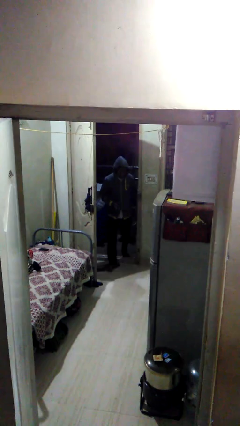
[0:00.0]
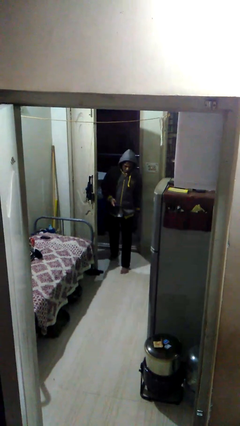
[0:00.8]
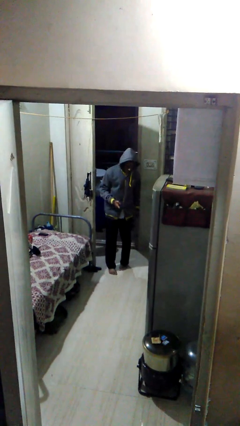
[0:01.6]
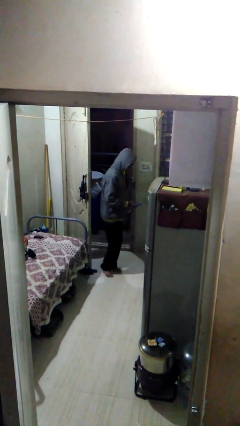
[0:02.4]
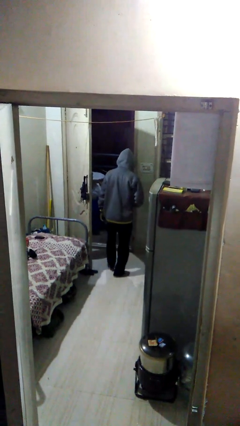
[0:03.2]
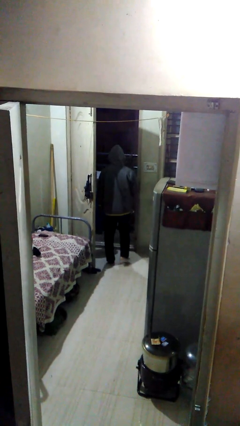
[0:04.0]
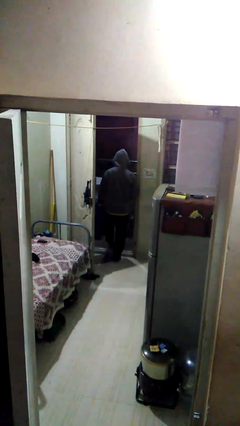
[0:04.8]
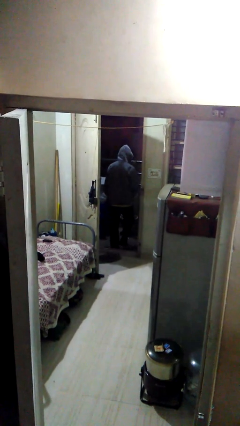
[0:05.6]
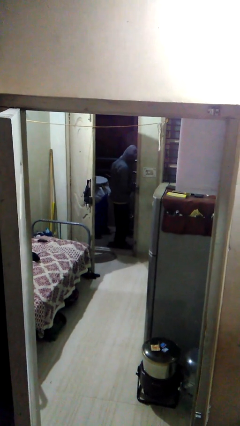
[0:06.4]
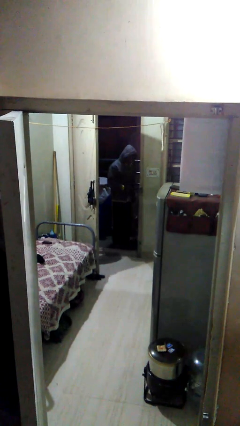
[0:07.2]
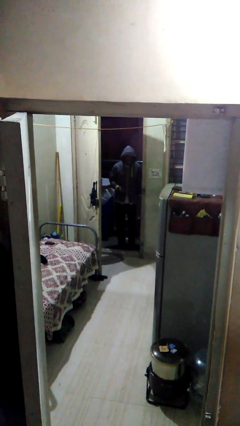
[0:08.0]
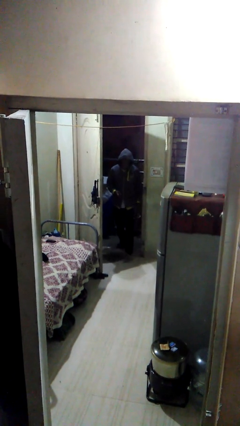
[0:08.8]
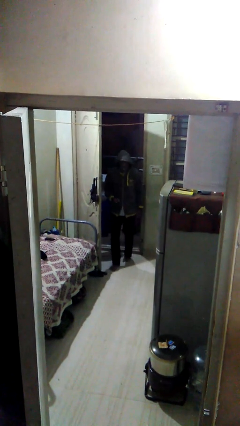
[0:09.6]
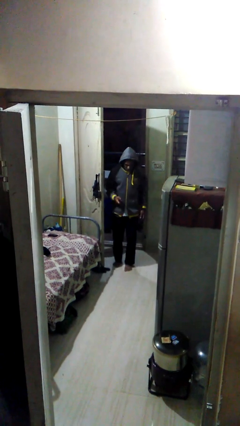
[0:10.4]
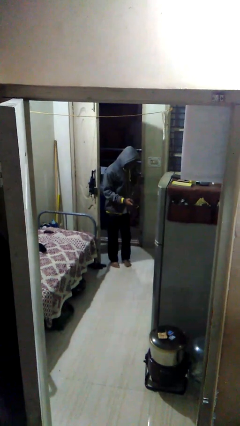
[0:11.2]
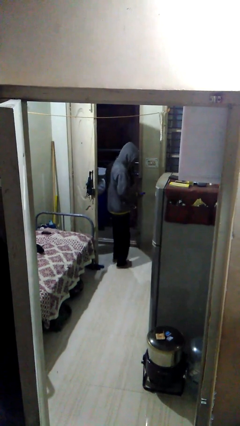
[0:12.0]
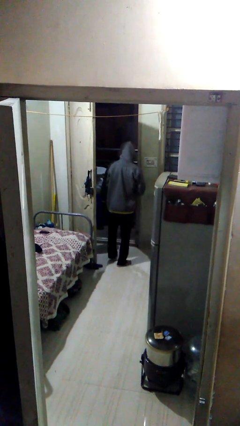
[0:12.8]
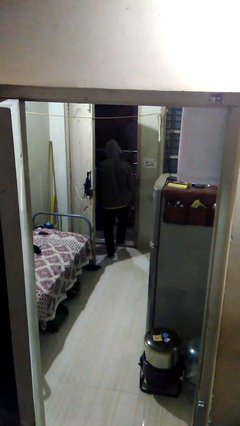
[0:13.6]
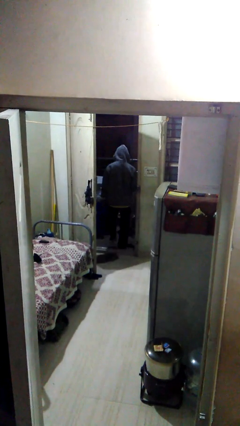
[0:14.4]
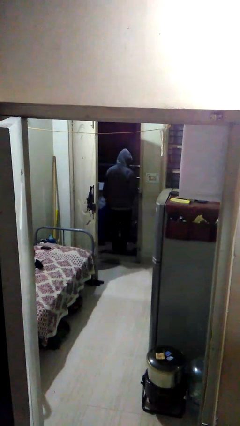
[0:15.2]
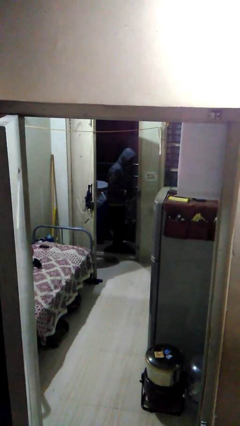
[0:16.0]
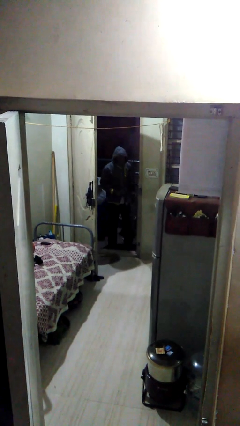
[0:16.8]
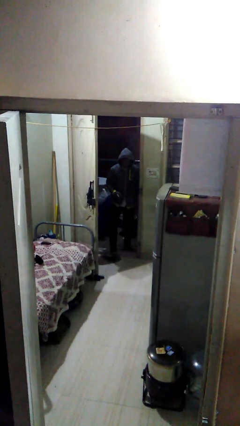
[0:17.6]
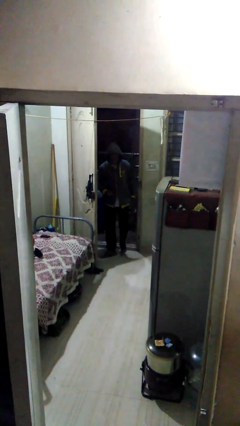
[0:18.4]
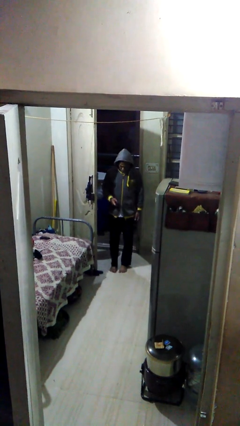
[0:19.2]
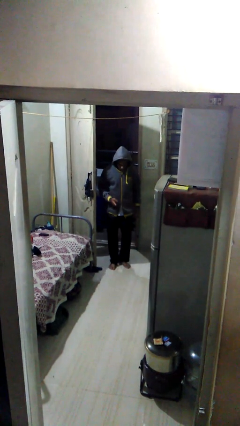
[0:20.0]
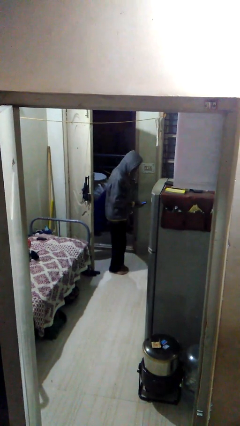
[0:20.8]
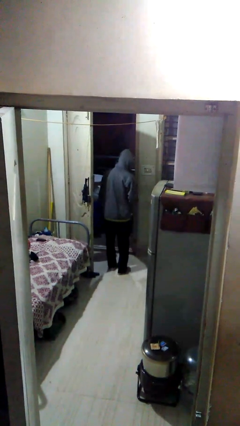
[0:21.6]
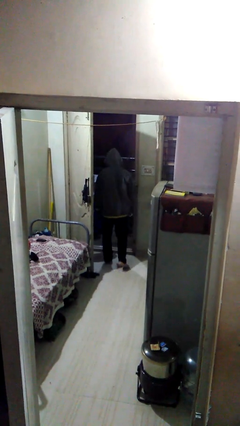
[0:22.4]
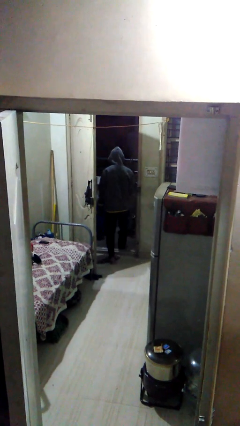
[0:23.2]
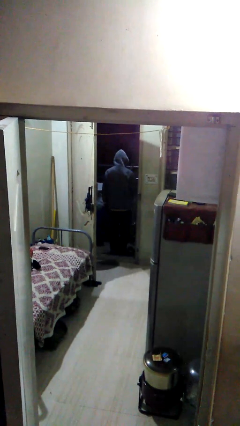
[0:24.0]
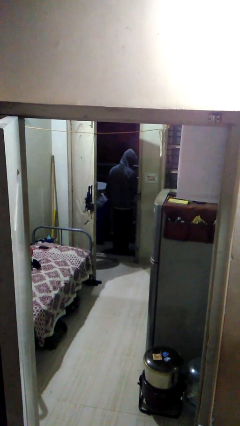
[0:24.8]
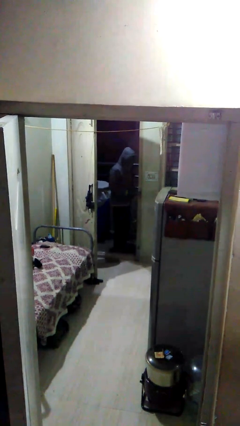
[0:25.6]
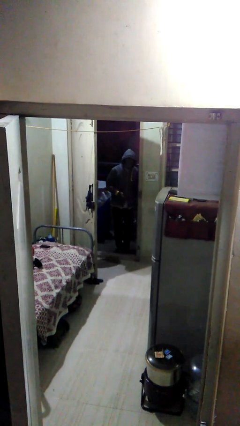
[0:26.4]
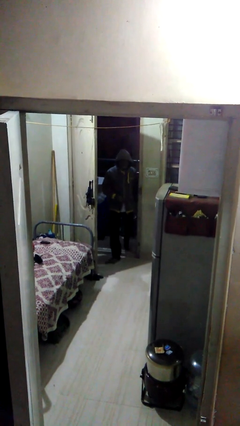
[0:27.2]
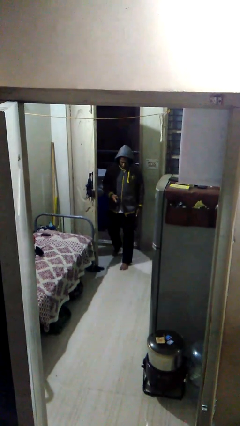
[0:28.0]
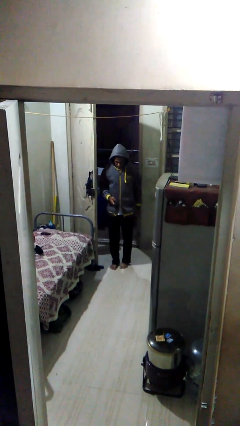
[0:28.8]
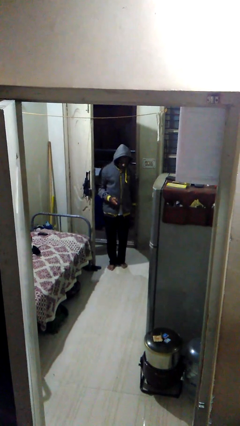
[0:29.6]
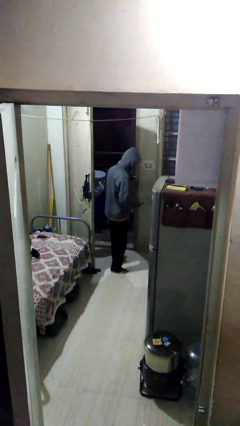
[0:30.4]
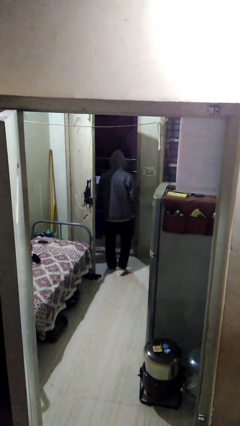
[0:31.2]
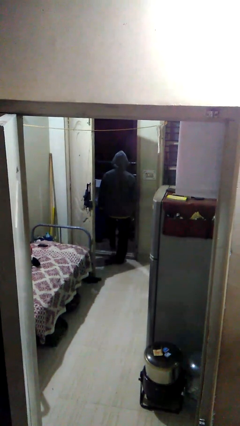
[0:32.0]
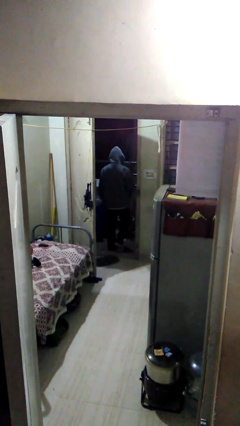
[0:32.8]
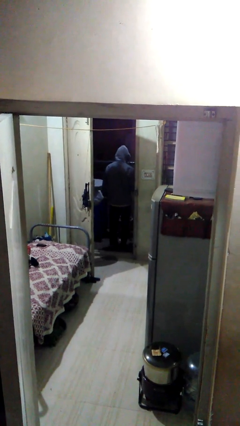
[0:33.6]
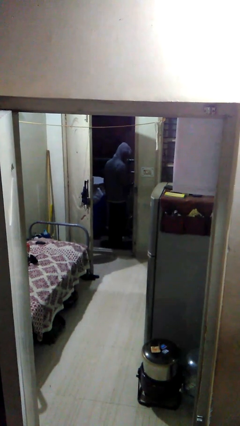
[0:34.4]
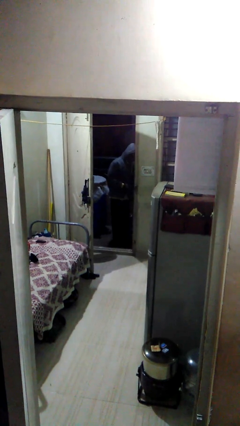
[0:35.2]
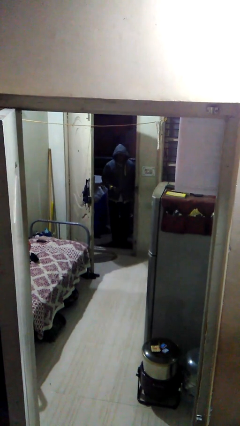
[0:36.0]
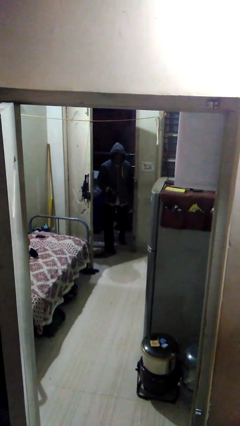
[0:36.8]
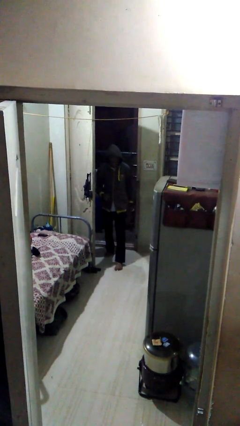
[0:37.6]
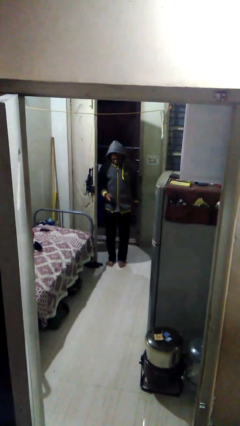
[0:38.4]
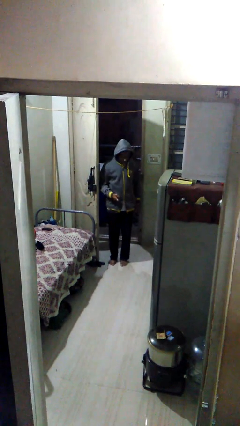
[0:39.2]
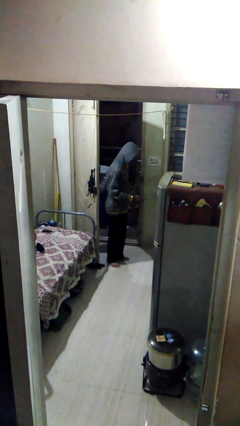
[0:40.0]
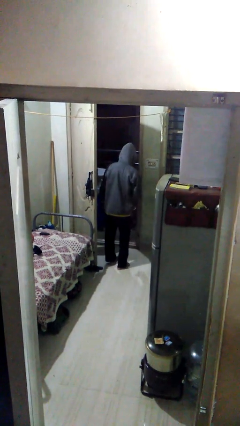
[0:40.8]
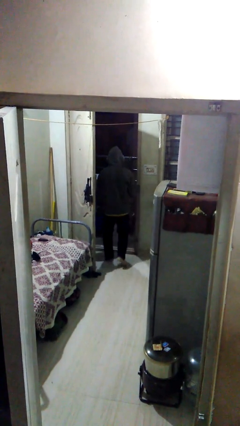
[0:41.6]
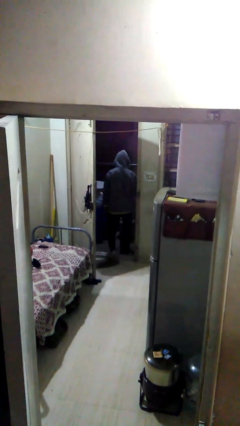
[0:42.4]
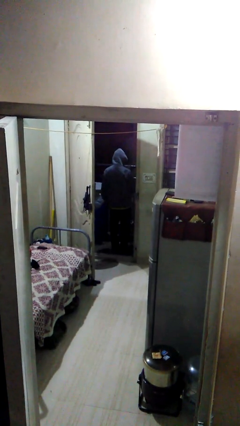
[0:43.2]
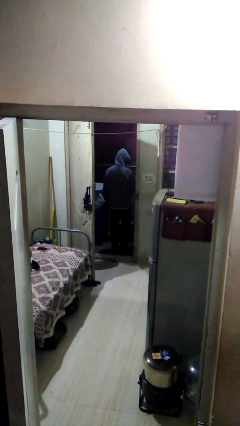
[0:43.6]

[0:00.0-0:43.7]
person texts on phone

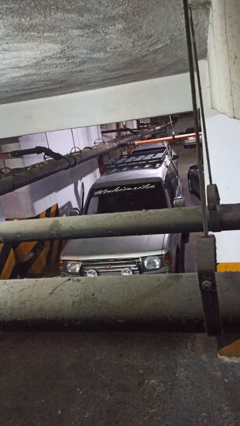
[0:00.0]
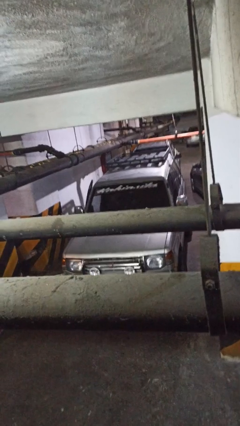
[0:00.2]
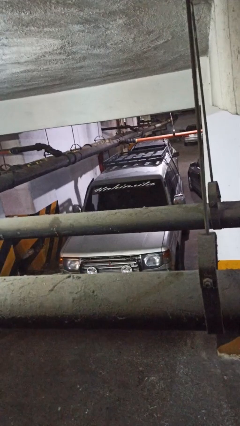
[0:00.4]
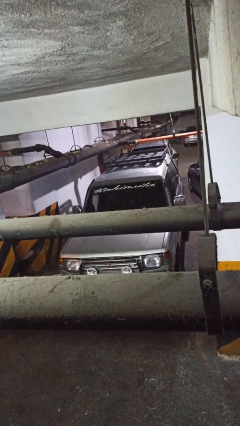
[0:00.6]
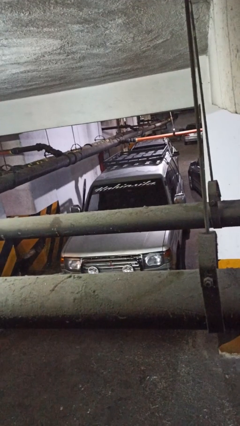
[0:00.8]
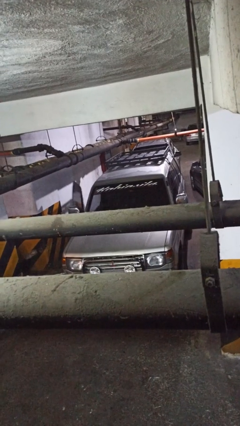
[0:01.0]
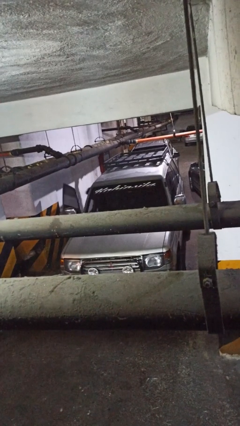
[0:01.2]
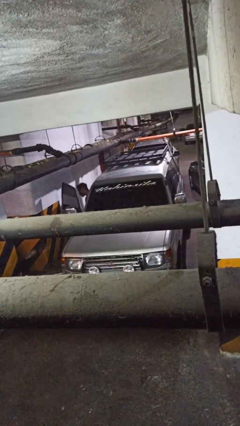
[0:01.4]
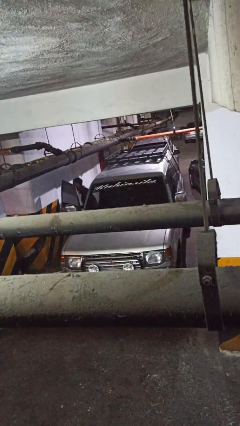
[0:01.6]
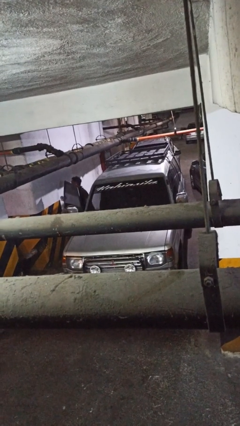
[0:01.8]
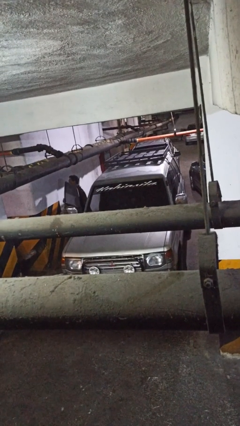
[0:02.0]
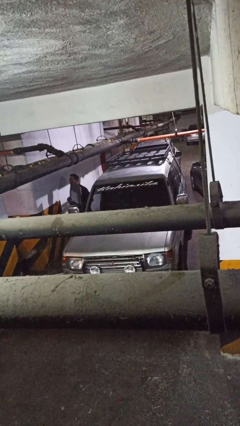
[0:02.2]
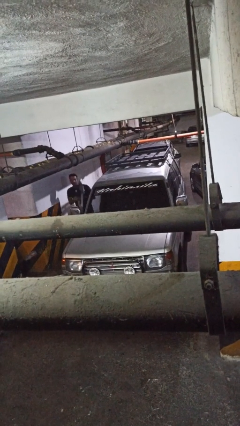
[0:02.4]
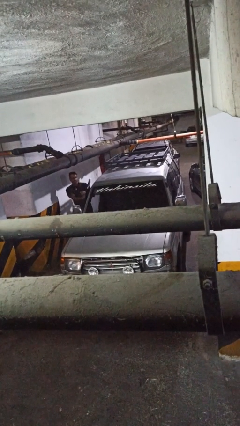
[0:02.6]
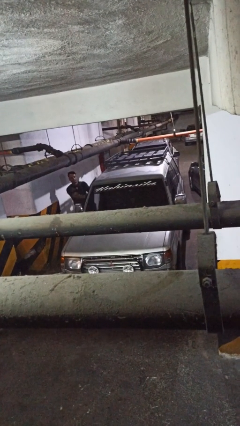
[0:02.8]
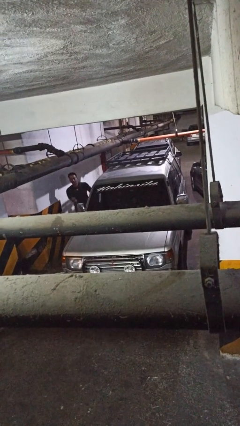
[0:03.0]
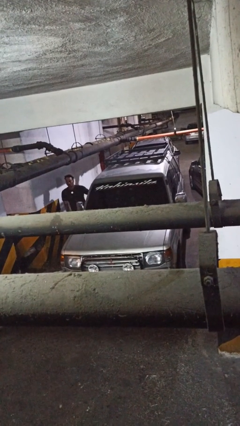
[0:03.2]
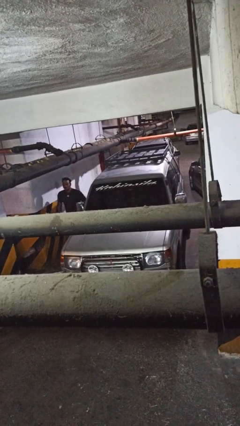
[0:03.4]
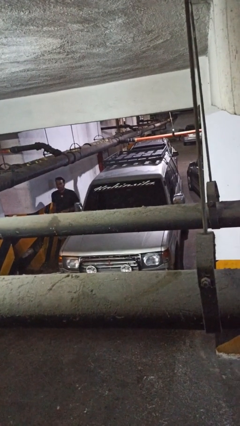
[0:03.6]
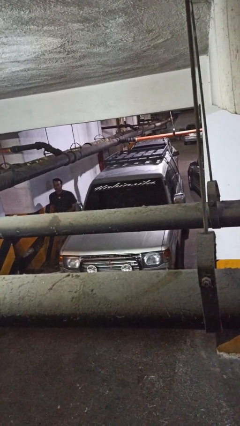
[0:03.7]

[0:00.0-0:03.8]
car drops off person

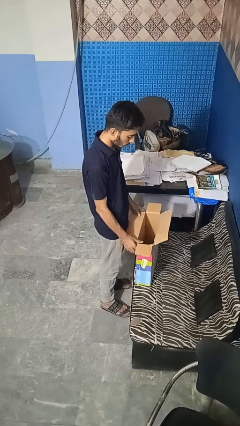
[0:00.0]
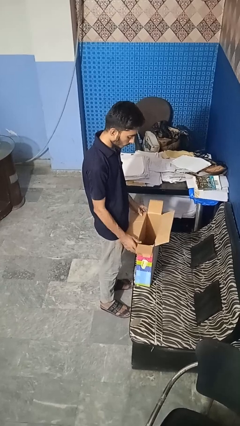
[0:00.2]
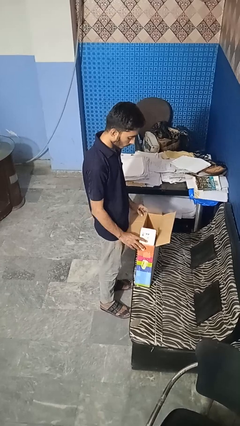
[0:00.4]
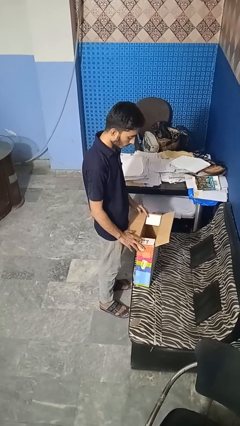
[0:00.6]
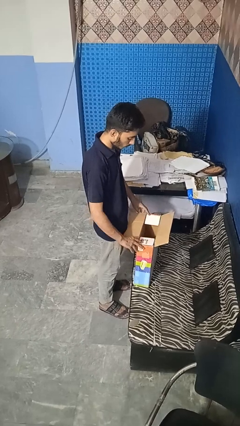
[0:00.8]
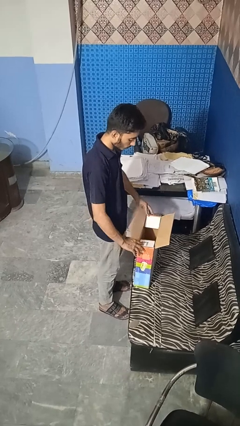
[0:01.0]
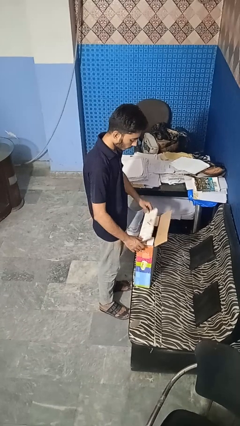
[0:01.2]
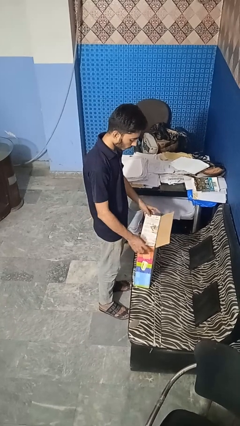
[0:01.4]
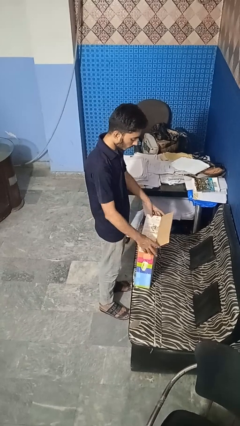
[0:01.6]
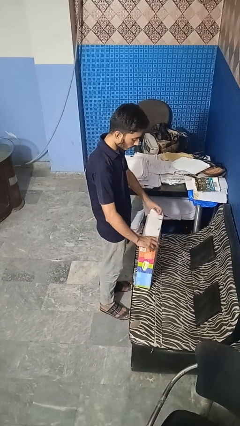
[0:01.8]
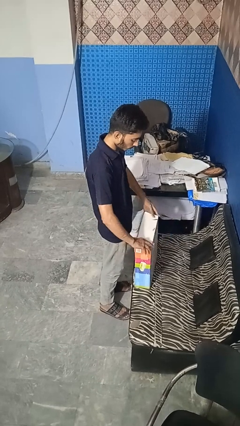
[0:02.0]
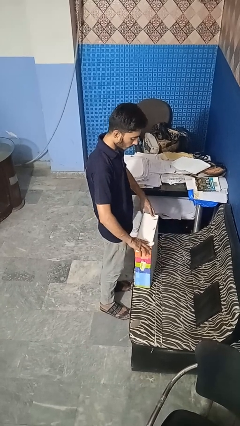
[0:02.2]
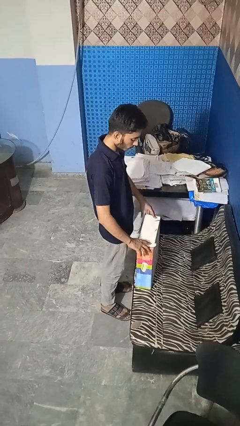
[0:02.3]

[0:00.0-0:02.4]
person closes box
